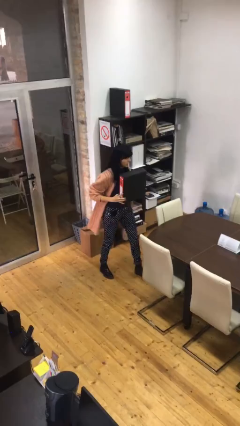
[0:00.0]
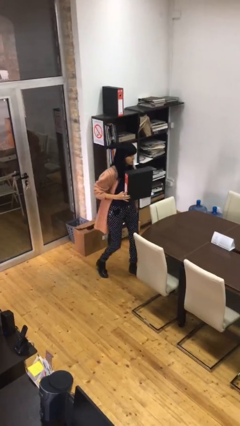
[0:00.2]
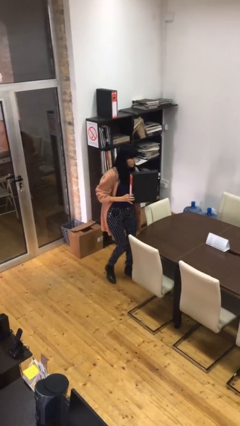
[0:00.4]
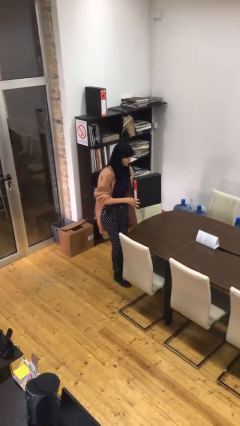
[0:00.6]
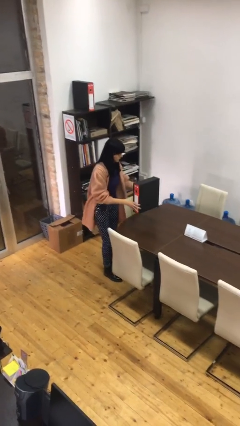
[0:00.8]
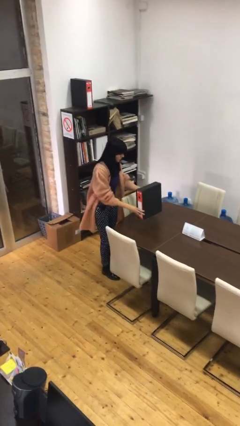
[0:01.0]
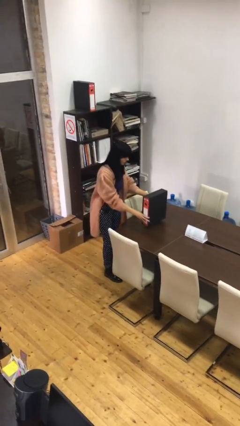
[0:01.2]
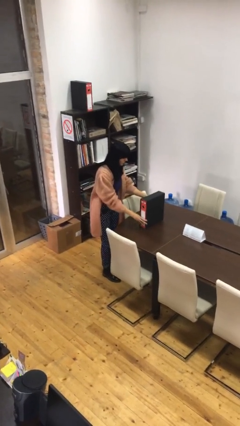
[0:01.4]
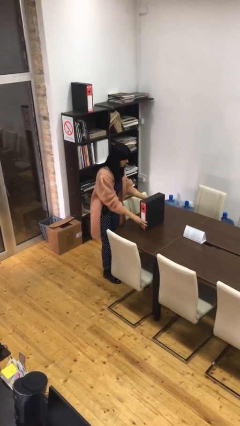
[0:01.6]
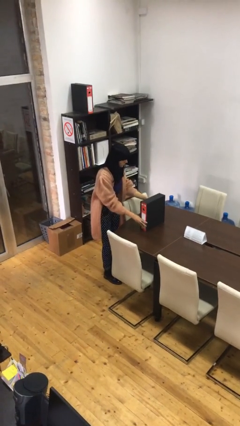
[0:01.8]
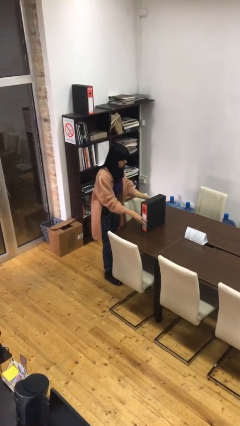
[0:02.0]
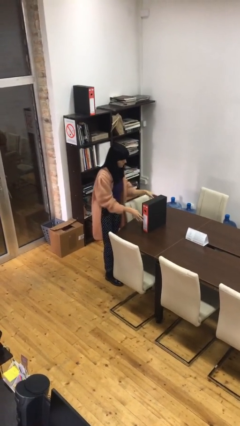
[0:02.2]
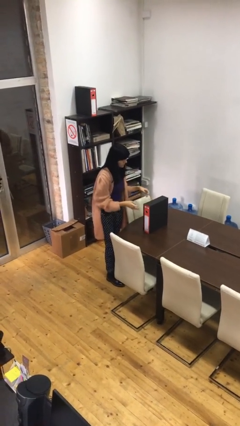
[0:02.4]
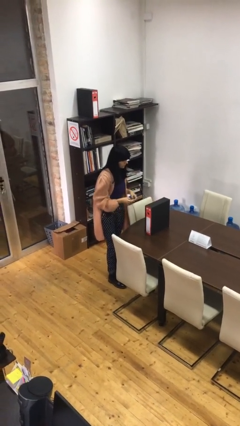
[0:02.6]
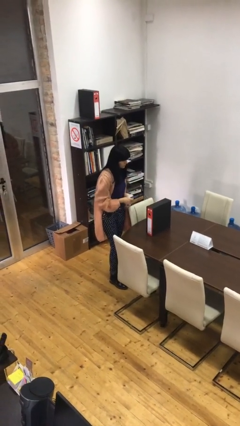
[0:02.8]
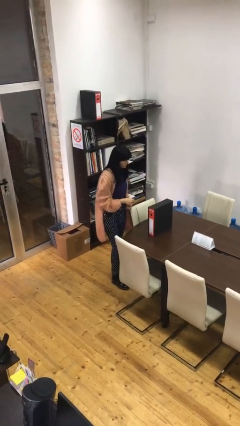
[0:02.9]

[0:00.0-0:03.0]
person puts down object on table

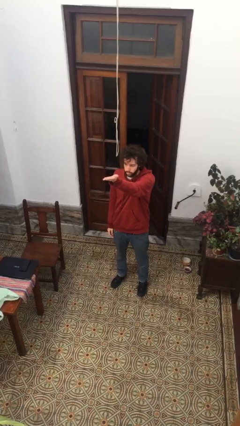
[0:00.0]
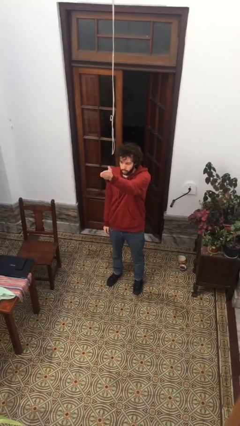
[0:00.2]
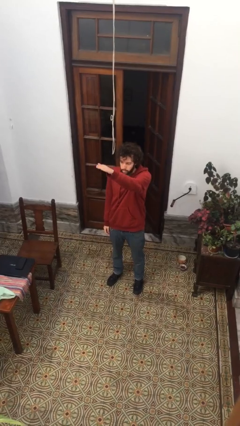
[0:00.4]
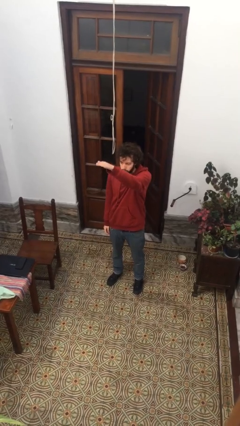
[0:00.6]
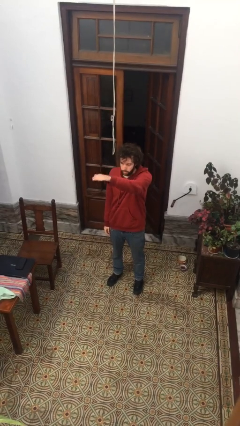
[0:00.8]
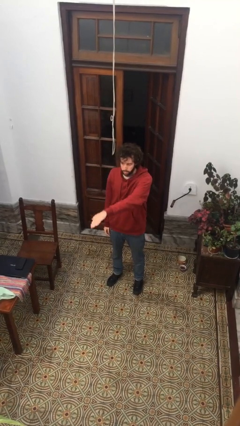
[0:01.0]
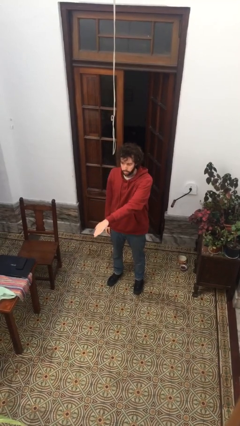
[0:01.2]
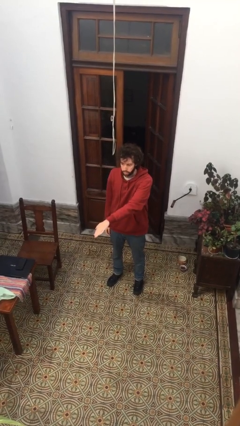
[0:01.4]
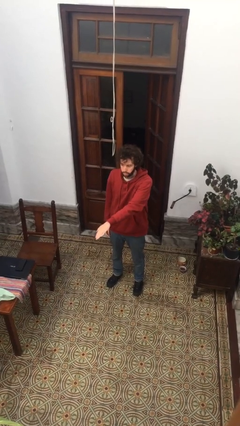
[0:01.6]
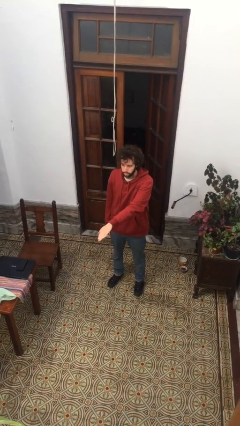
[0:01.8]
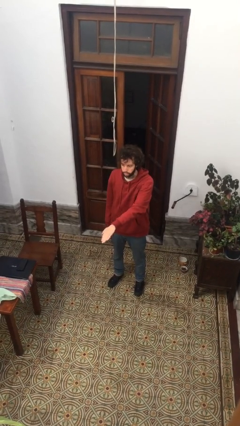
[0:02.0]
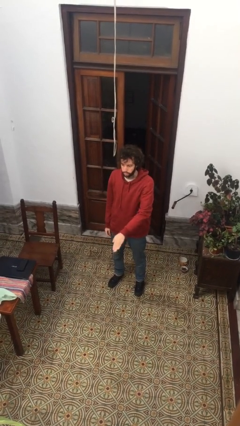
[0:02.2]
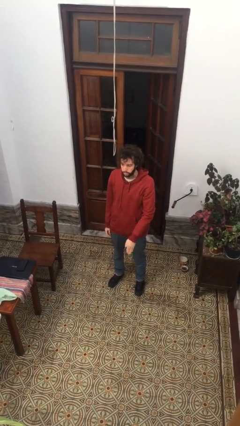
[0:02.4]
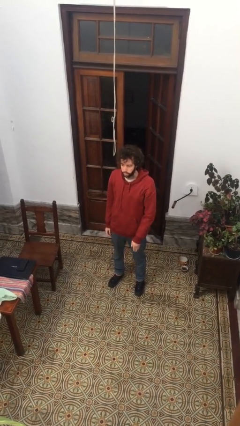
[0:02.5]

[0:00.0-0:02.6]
person gestures swipe down

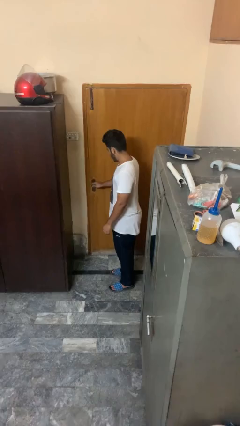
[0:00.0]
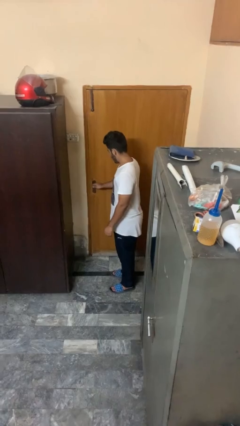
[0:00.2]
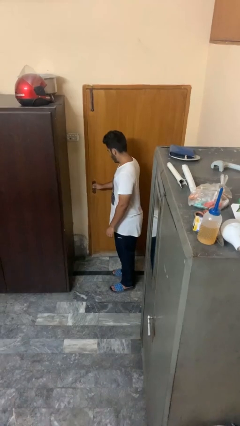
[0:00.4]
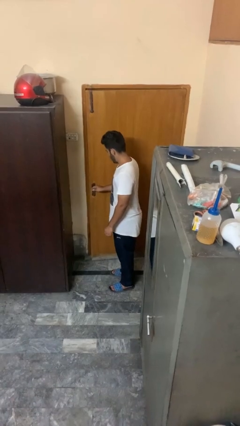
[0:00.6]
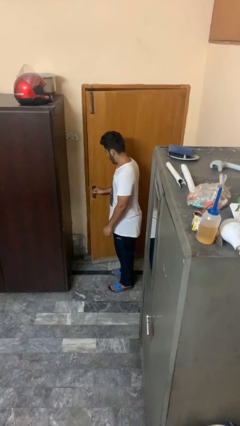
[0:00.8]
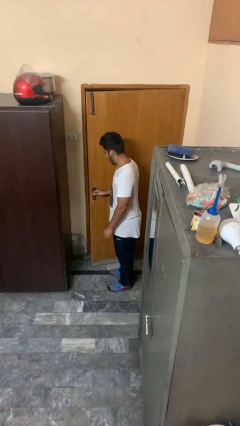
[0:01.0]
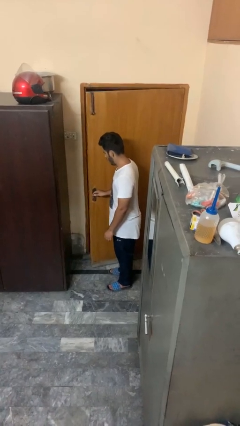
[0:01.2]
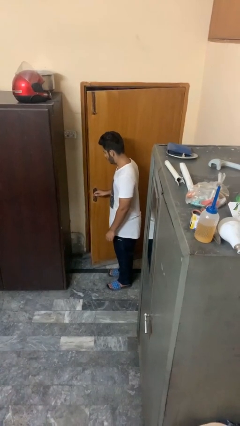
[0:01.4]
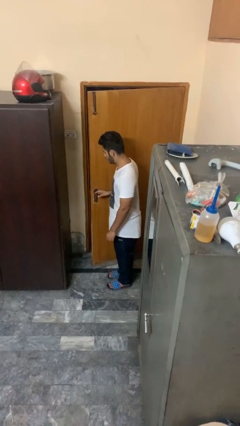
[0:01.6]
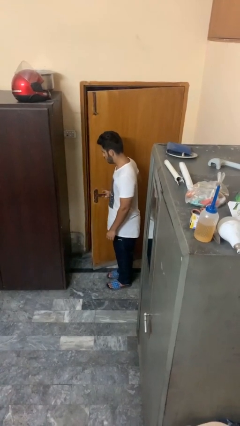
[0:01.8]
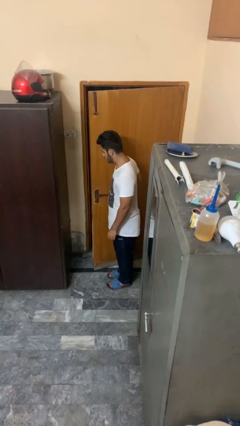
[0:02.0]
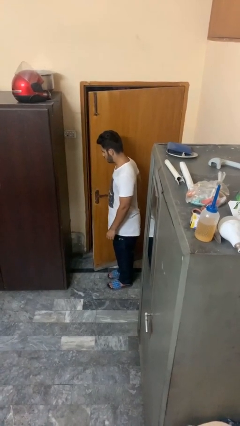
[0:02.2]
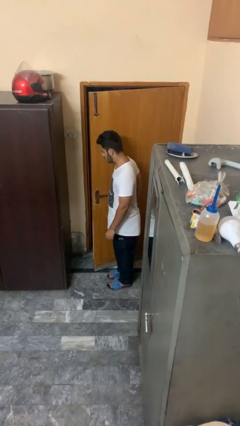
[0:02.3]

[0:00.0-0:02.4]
person opens facility door

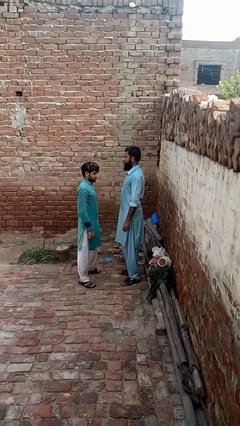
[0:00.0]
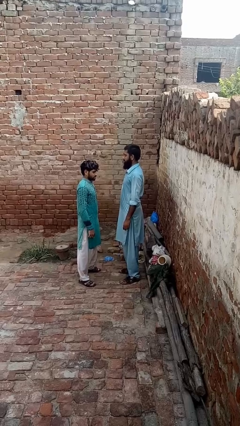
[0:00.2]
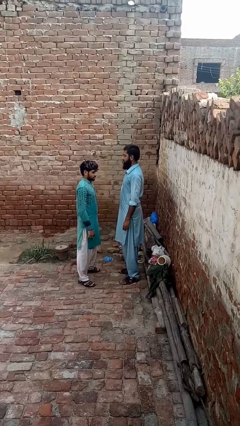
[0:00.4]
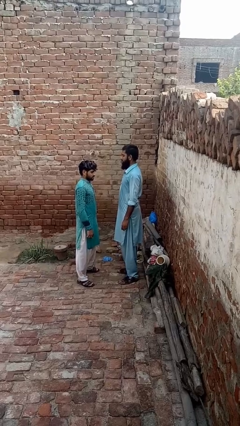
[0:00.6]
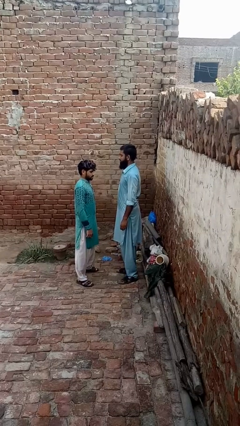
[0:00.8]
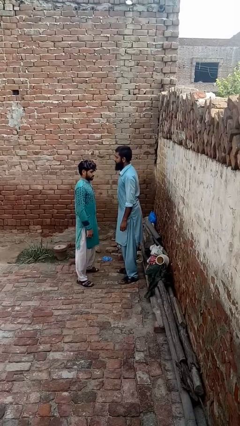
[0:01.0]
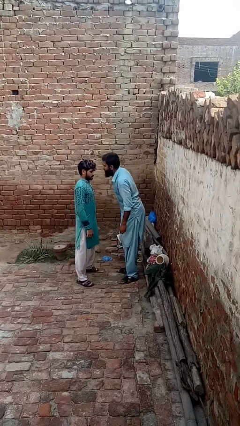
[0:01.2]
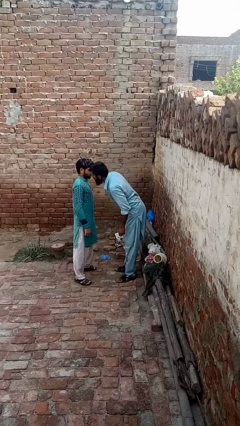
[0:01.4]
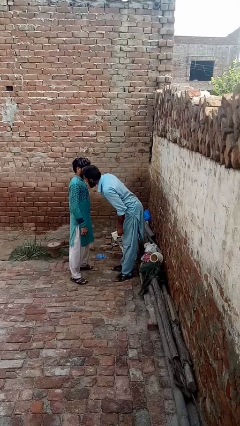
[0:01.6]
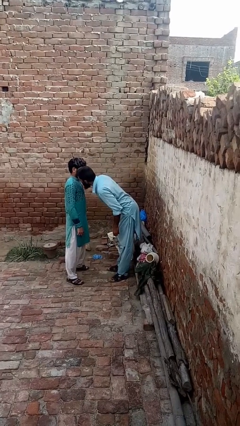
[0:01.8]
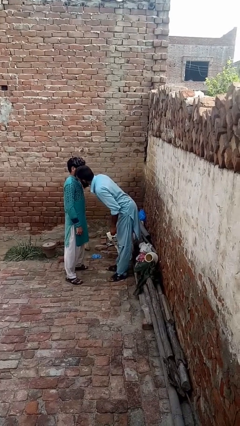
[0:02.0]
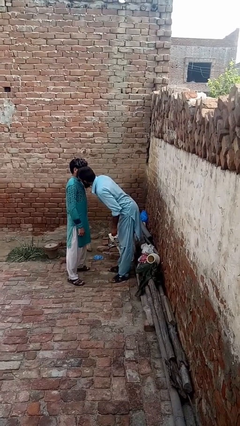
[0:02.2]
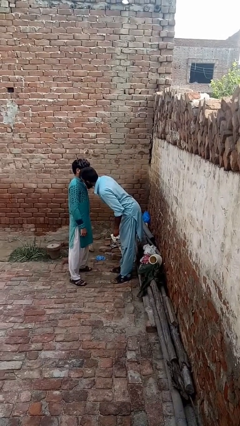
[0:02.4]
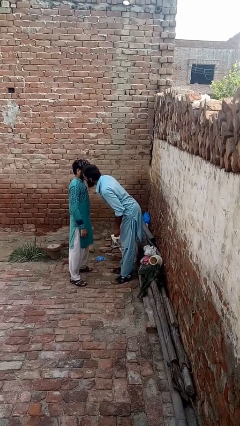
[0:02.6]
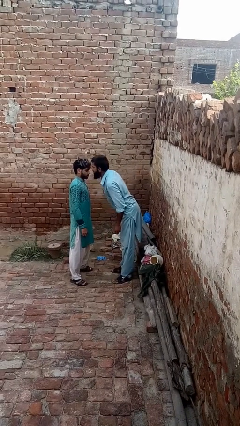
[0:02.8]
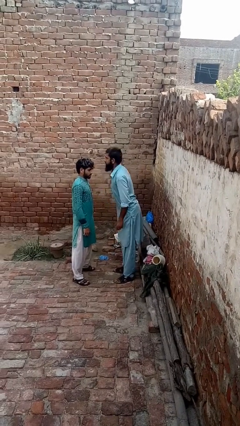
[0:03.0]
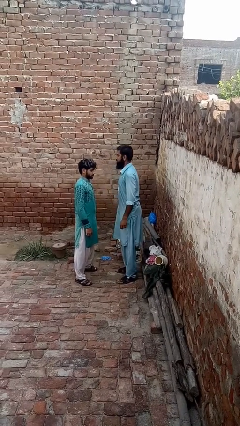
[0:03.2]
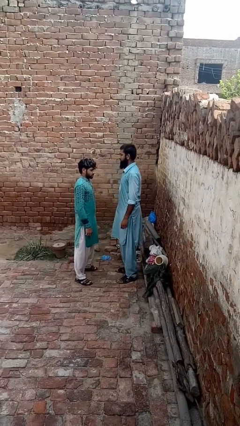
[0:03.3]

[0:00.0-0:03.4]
person kisses cheek of person

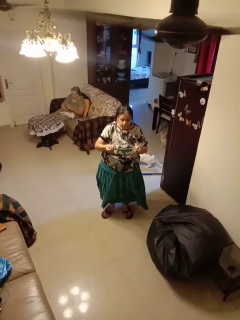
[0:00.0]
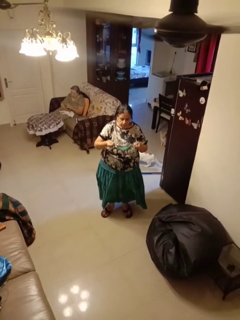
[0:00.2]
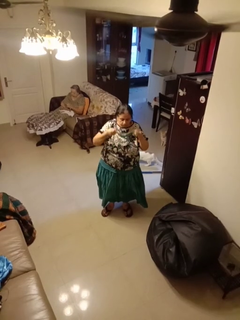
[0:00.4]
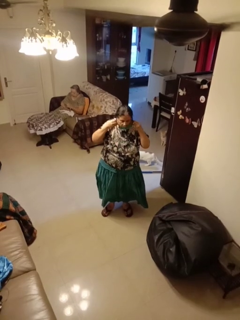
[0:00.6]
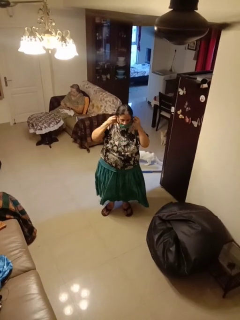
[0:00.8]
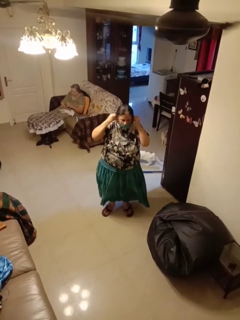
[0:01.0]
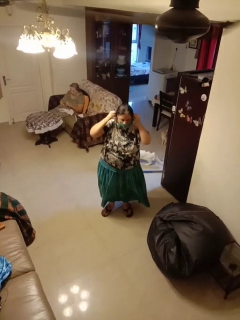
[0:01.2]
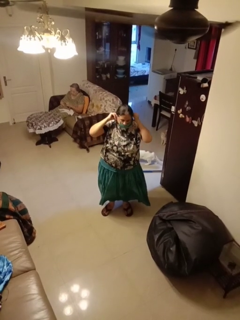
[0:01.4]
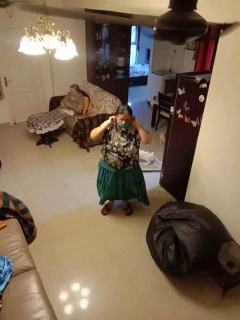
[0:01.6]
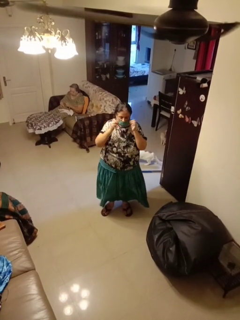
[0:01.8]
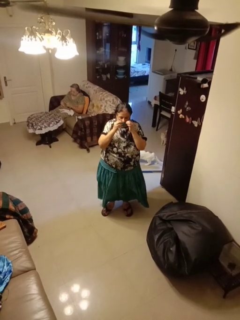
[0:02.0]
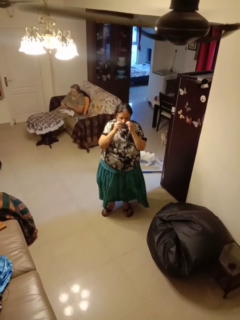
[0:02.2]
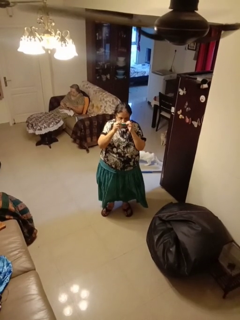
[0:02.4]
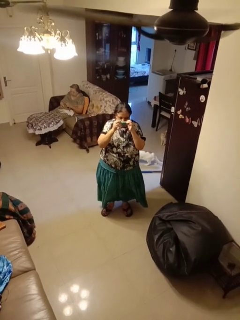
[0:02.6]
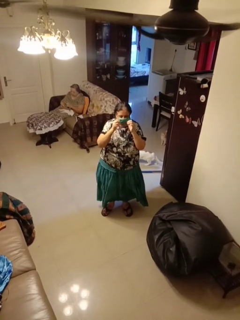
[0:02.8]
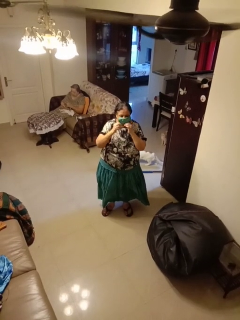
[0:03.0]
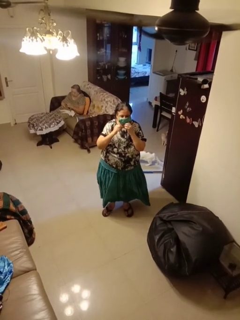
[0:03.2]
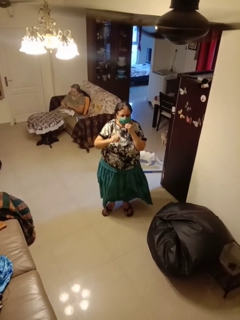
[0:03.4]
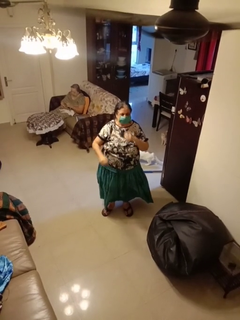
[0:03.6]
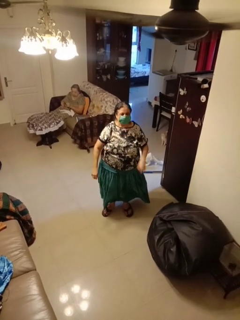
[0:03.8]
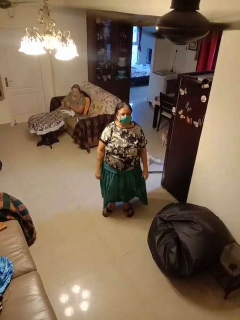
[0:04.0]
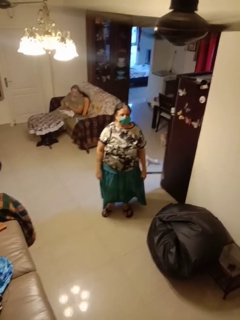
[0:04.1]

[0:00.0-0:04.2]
person puts on facemask

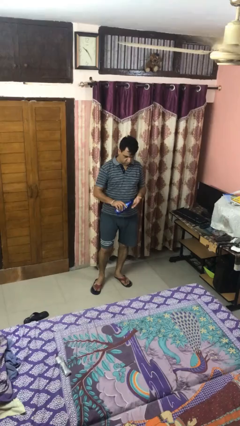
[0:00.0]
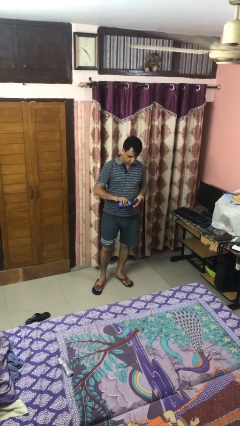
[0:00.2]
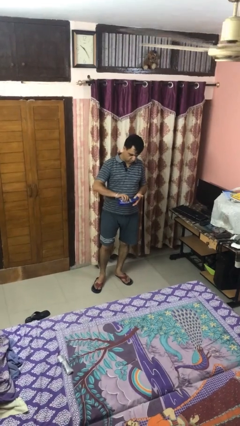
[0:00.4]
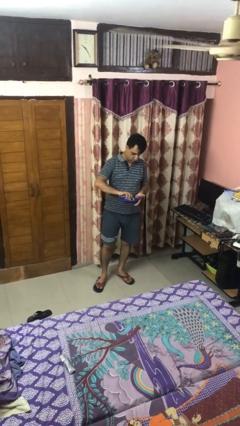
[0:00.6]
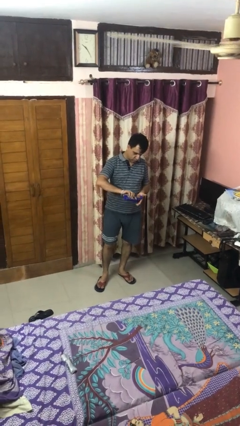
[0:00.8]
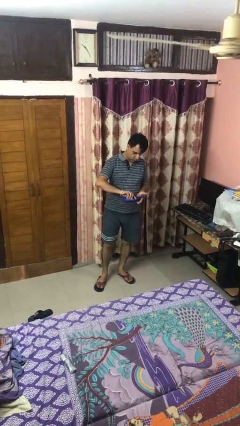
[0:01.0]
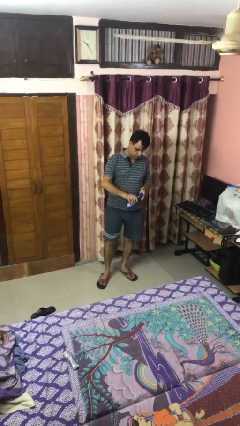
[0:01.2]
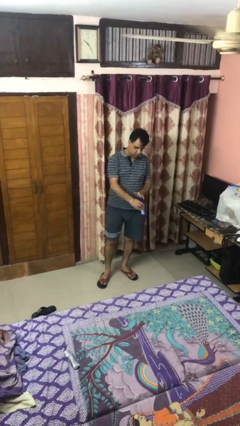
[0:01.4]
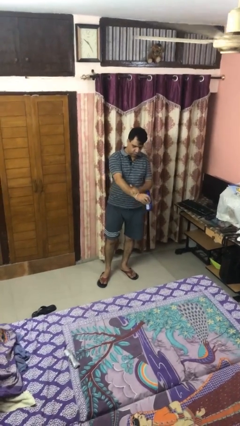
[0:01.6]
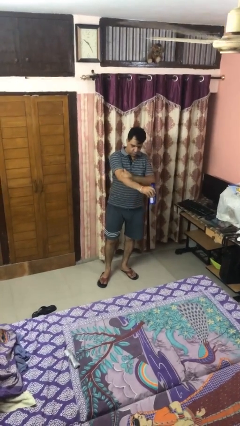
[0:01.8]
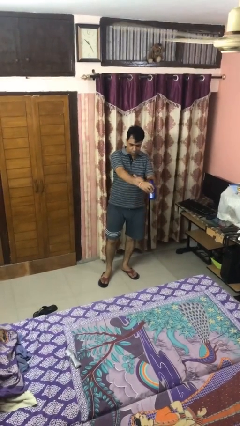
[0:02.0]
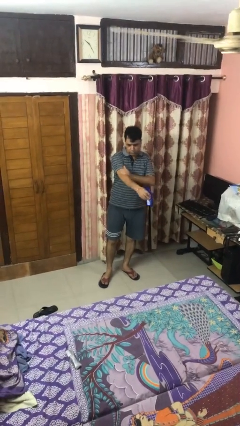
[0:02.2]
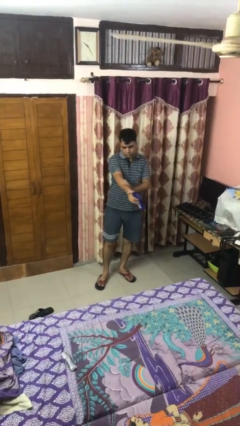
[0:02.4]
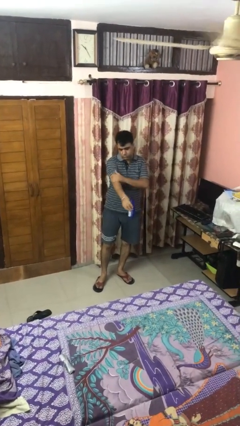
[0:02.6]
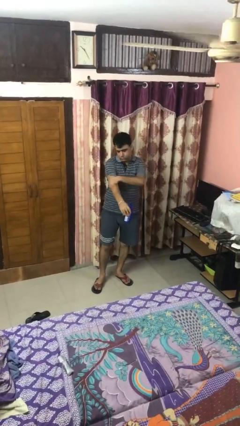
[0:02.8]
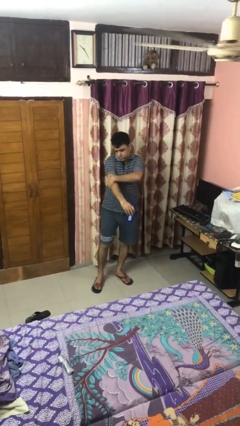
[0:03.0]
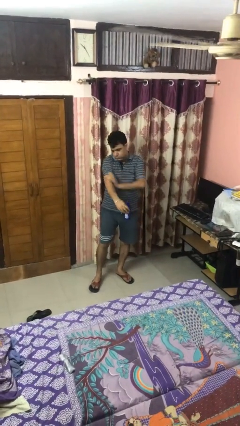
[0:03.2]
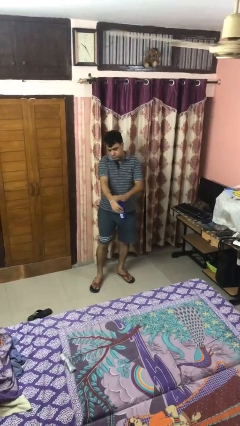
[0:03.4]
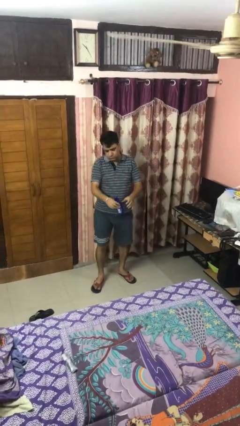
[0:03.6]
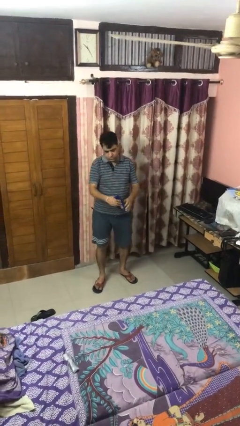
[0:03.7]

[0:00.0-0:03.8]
person applies sunscreen
